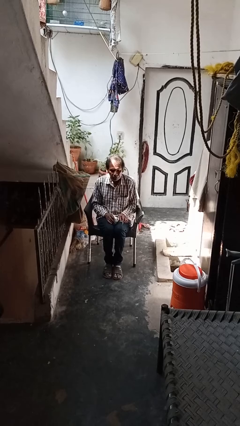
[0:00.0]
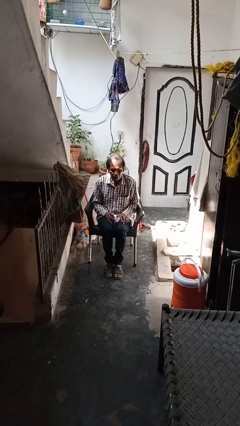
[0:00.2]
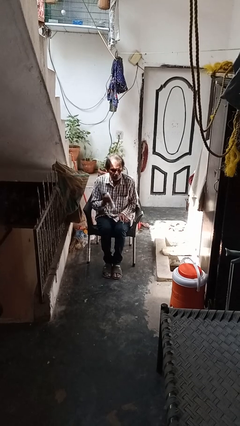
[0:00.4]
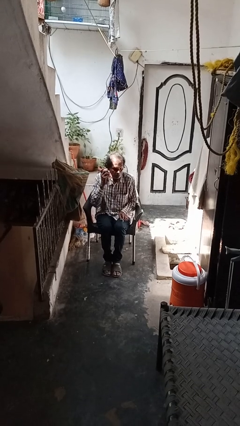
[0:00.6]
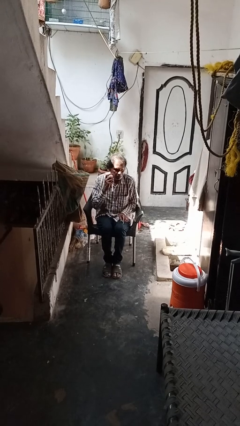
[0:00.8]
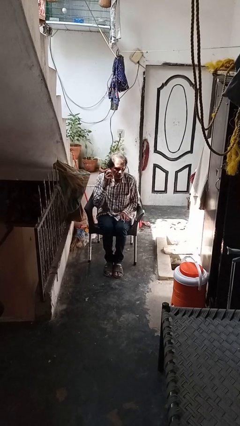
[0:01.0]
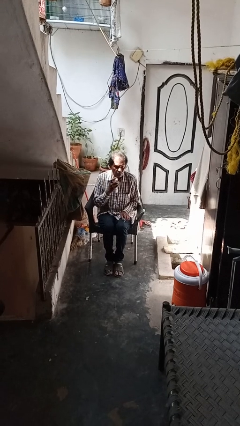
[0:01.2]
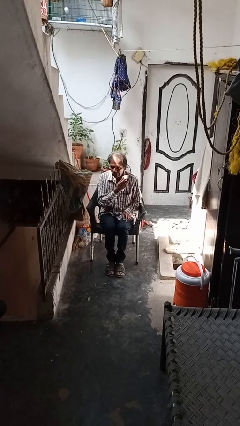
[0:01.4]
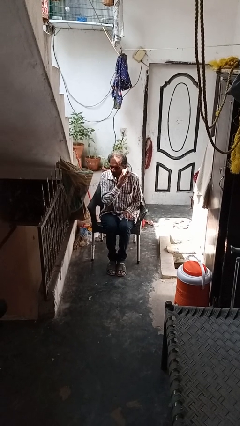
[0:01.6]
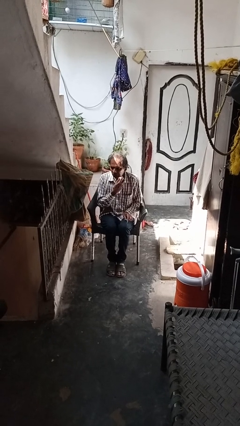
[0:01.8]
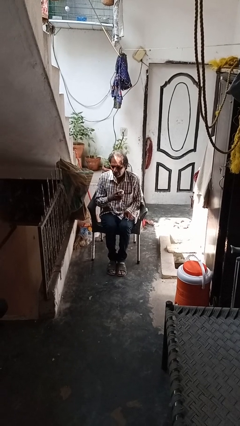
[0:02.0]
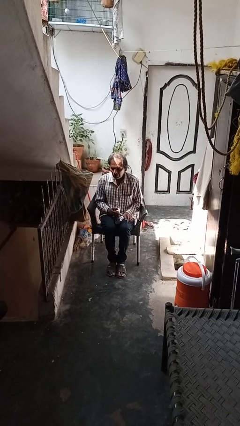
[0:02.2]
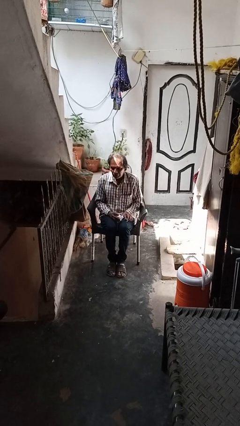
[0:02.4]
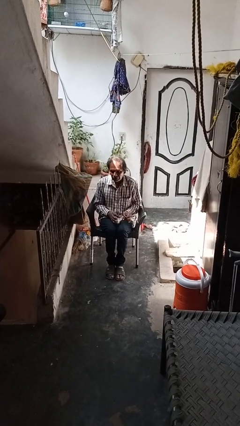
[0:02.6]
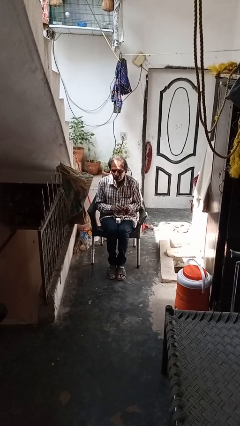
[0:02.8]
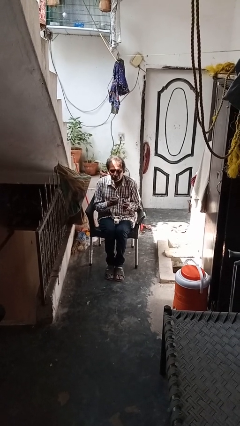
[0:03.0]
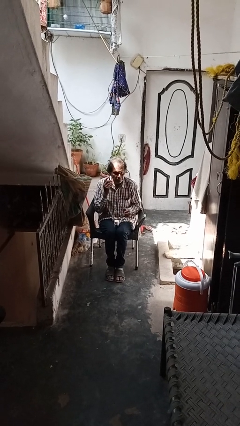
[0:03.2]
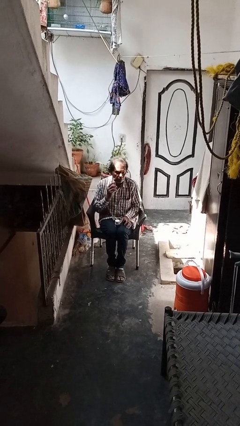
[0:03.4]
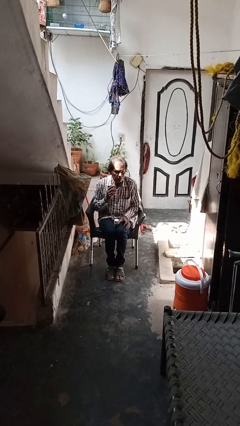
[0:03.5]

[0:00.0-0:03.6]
person applies shaving cream

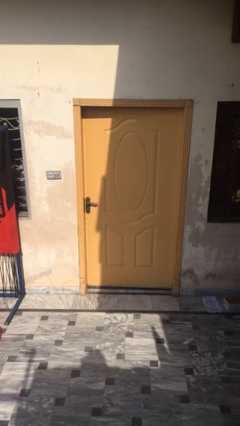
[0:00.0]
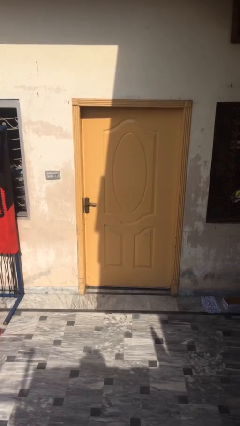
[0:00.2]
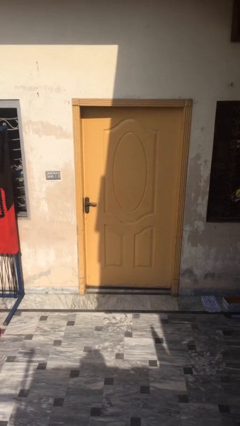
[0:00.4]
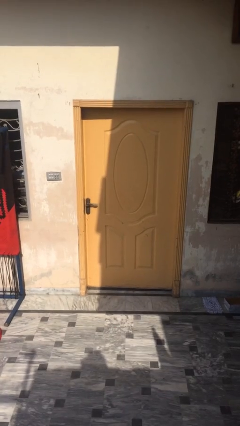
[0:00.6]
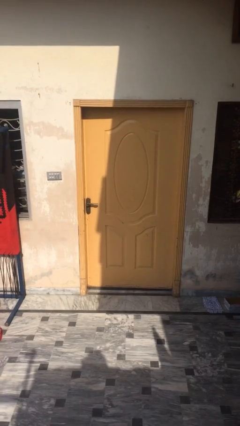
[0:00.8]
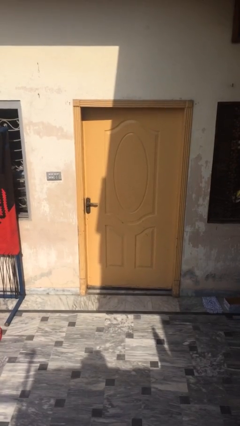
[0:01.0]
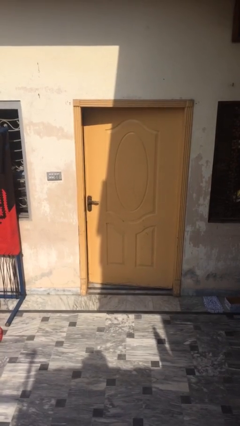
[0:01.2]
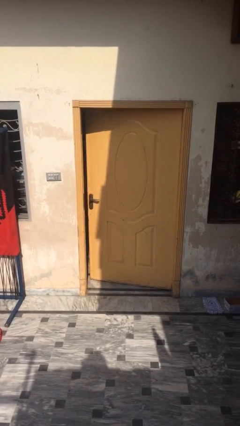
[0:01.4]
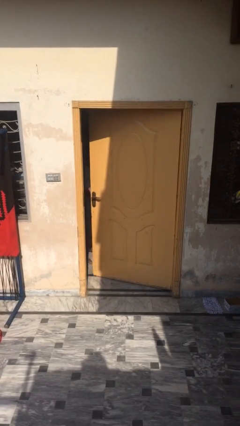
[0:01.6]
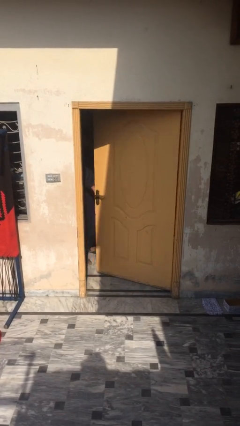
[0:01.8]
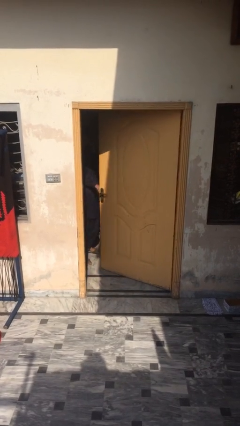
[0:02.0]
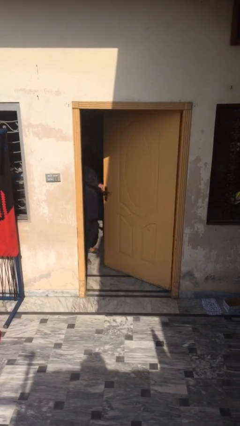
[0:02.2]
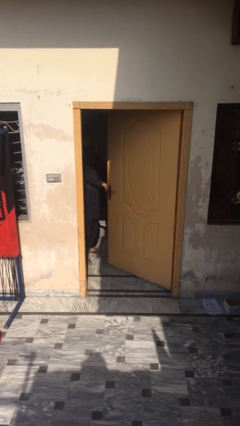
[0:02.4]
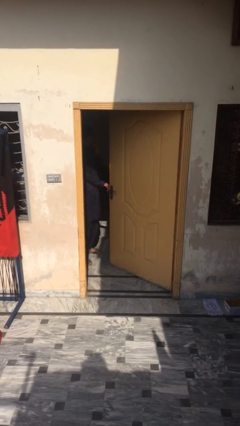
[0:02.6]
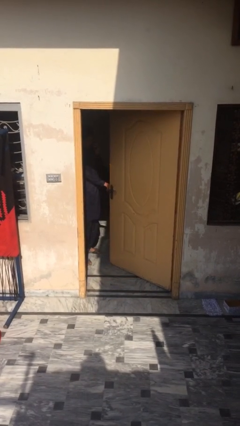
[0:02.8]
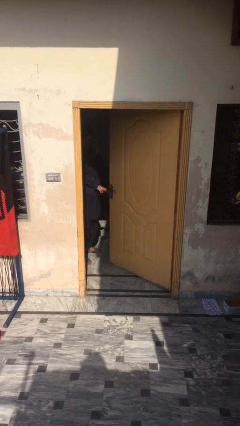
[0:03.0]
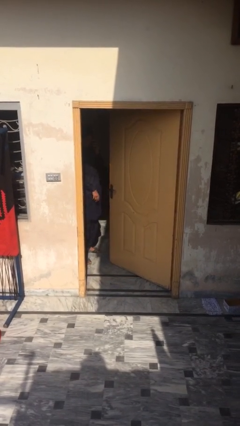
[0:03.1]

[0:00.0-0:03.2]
person opens facility door

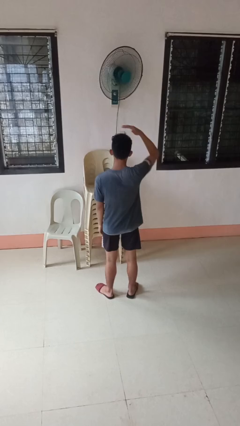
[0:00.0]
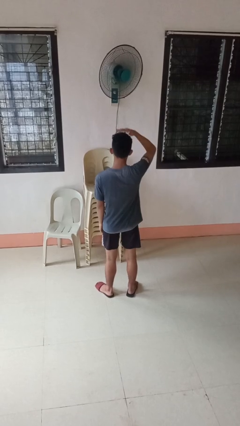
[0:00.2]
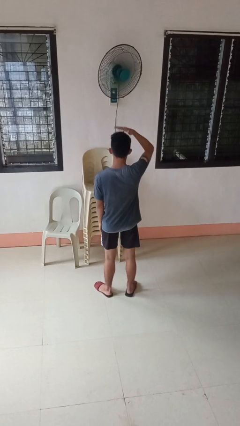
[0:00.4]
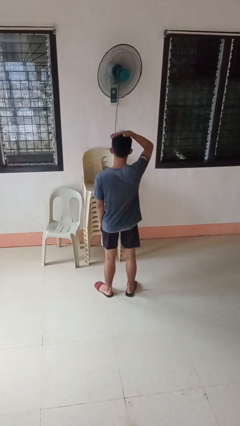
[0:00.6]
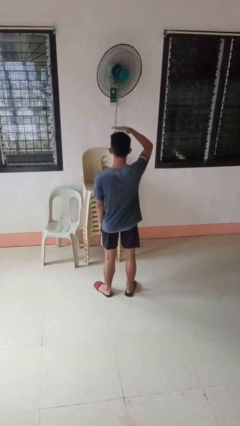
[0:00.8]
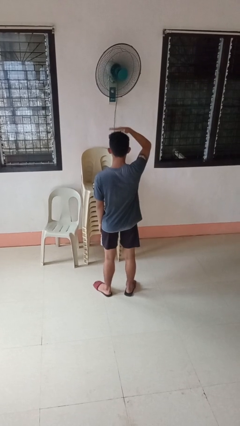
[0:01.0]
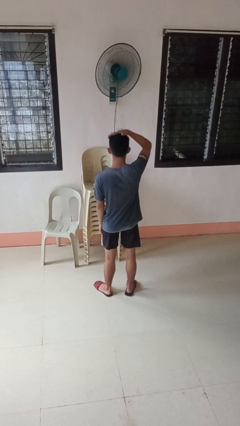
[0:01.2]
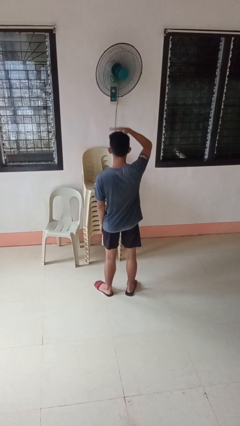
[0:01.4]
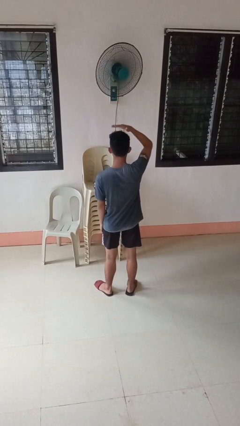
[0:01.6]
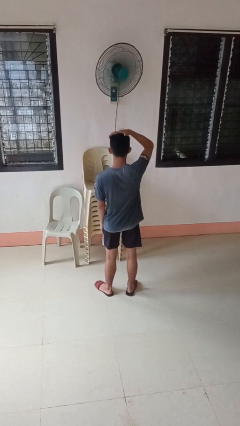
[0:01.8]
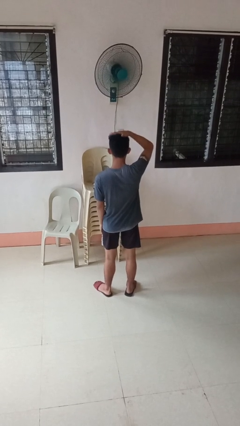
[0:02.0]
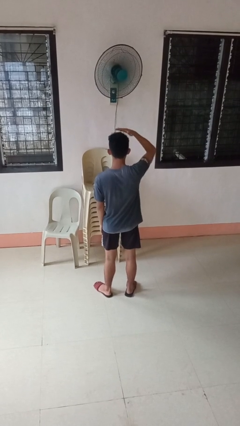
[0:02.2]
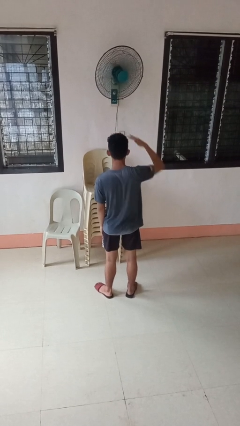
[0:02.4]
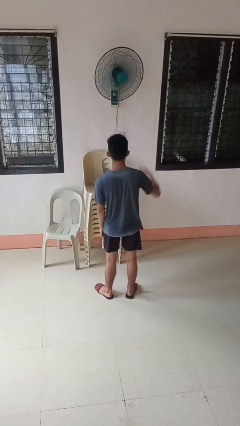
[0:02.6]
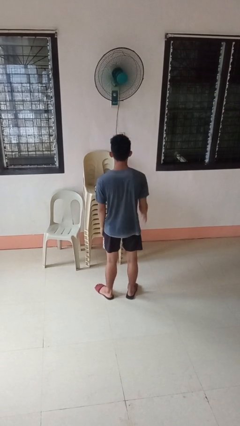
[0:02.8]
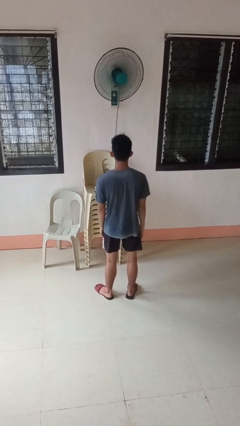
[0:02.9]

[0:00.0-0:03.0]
person pats head

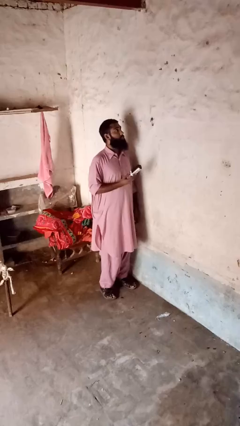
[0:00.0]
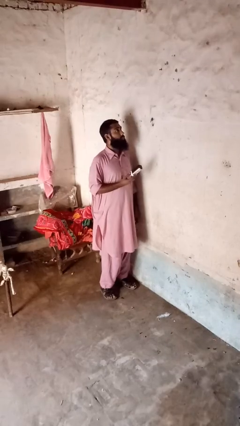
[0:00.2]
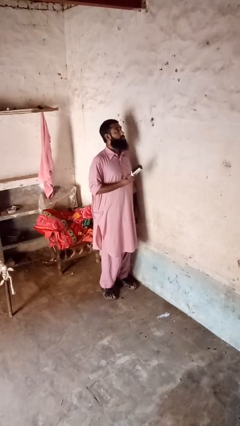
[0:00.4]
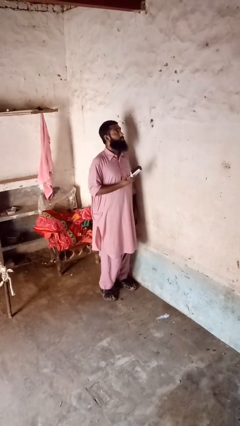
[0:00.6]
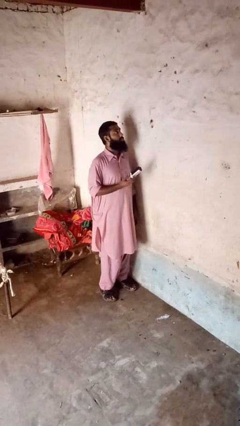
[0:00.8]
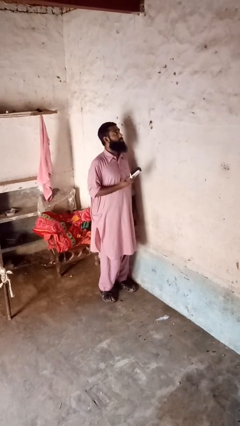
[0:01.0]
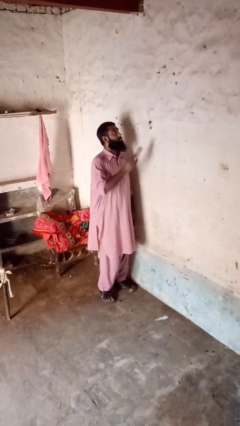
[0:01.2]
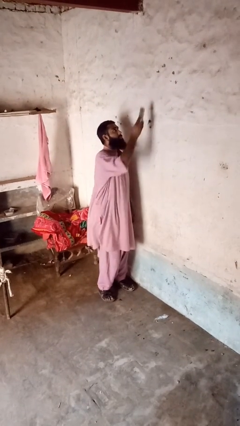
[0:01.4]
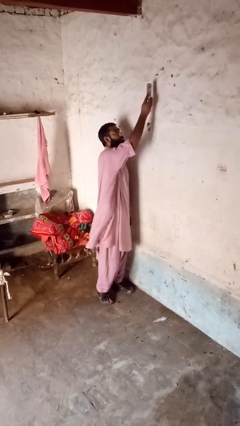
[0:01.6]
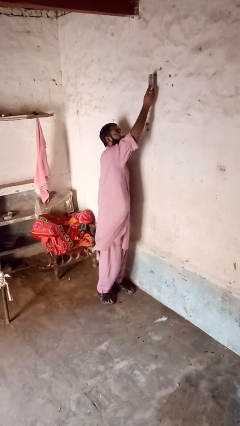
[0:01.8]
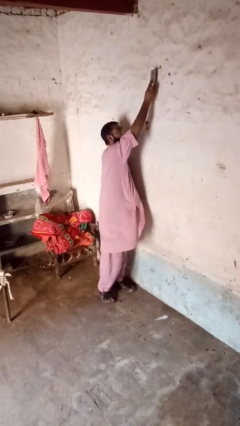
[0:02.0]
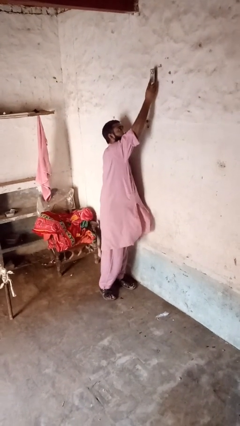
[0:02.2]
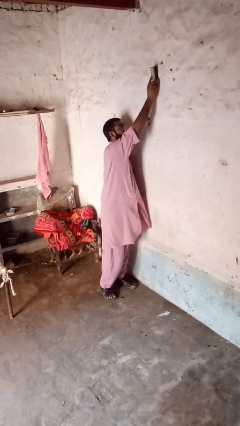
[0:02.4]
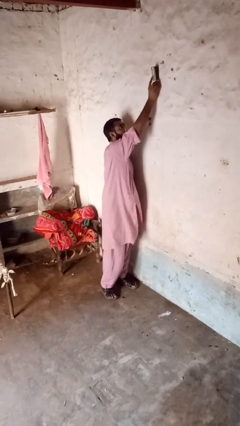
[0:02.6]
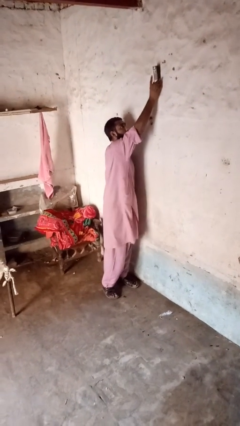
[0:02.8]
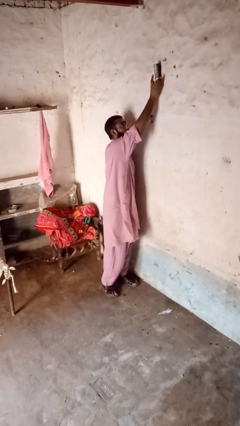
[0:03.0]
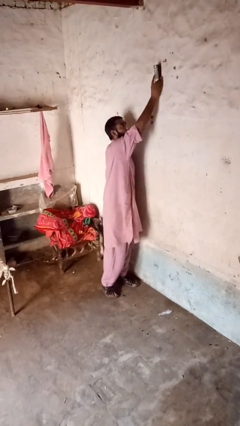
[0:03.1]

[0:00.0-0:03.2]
person adjusts thermostat

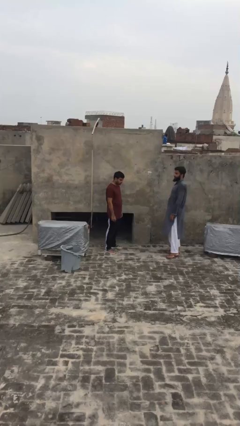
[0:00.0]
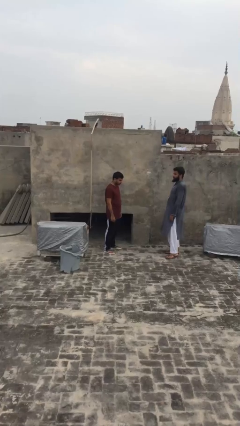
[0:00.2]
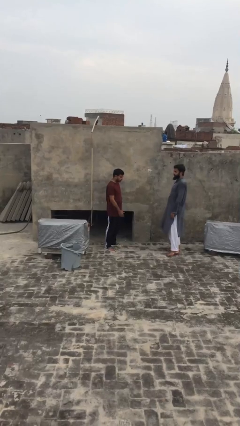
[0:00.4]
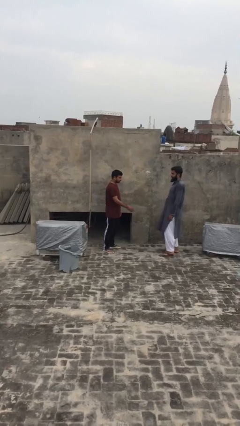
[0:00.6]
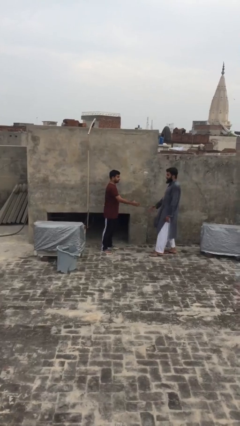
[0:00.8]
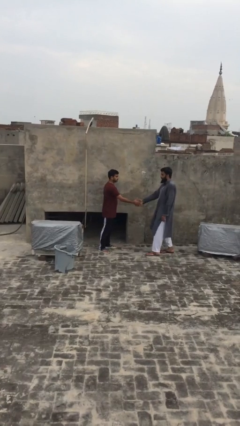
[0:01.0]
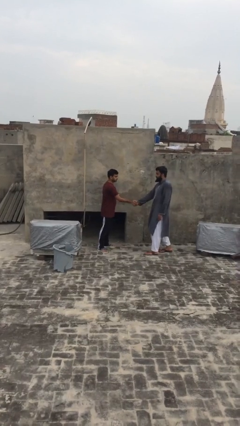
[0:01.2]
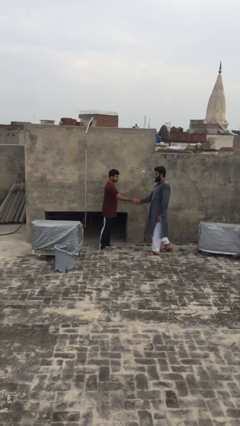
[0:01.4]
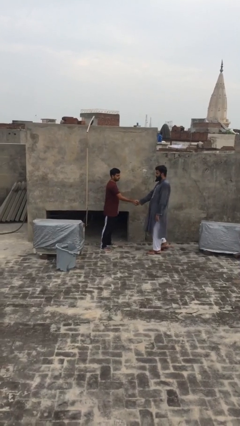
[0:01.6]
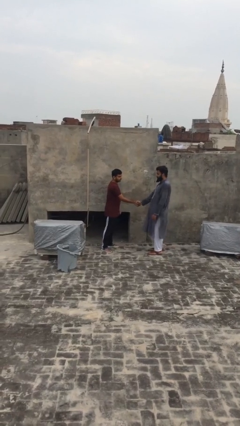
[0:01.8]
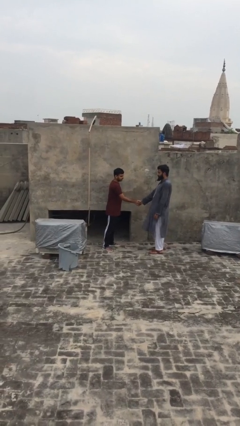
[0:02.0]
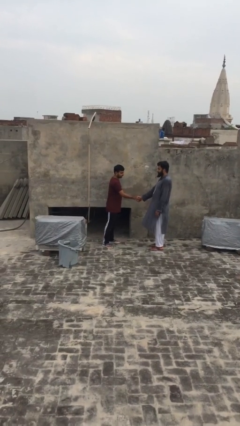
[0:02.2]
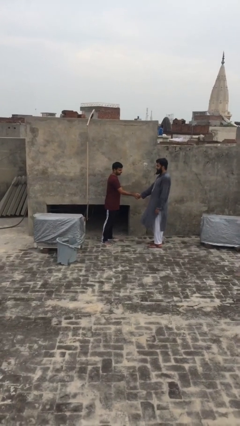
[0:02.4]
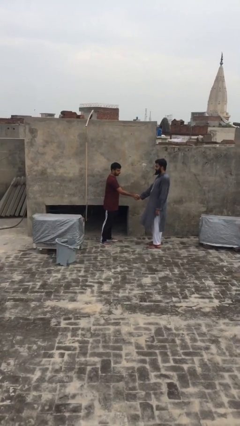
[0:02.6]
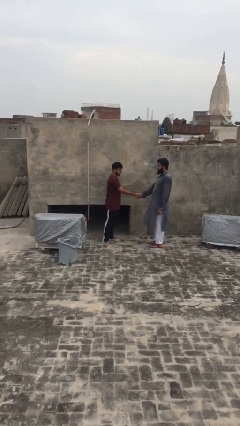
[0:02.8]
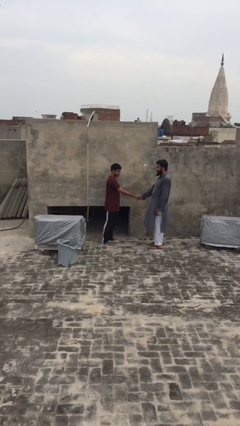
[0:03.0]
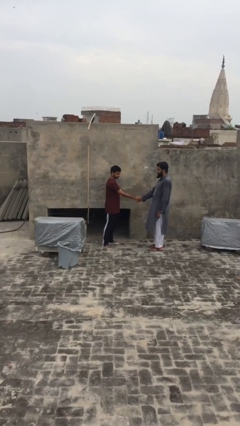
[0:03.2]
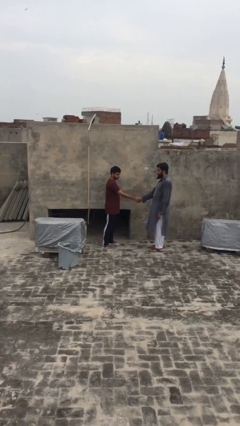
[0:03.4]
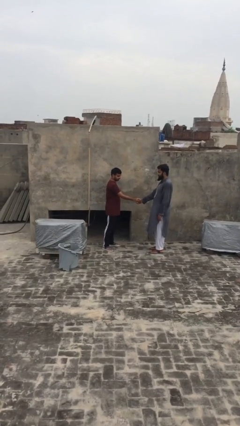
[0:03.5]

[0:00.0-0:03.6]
person shakes hand

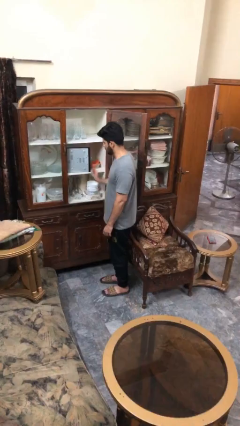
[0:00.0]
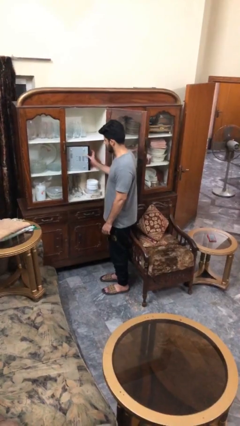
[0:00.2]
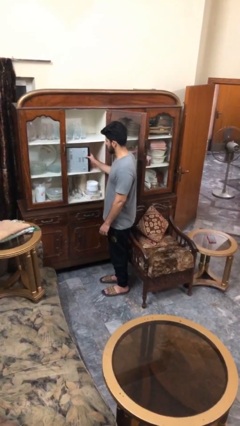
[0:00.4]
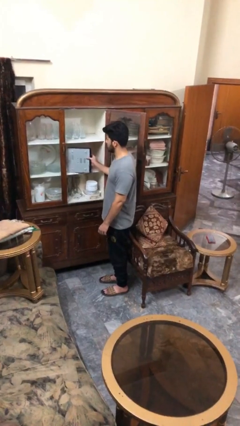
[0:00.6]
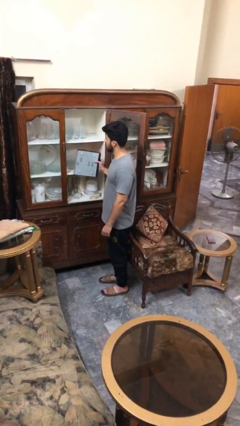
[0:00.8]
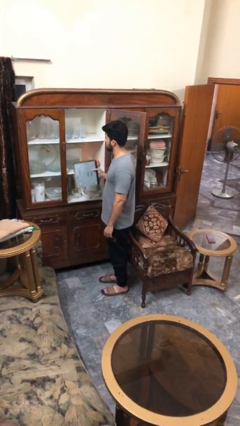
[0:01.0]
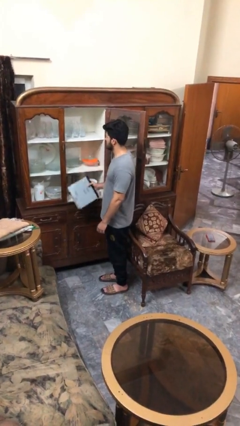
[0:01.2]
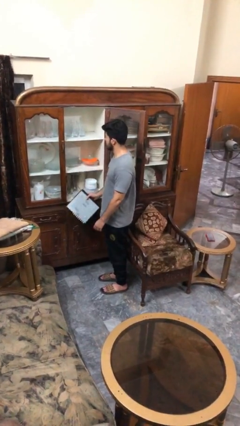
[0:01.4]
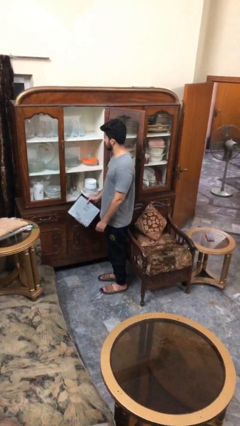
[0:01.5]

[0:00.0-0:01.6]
person picks up object from cabinet
